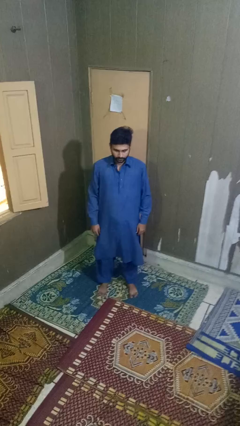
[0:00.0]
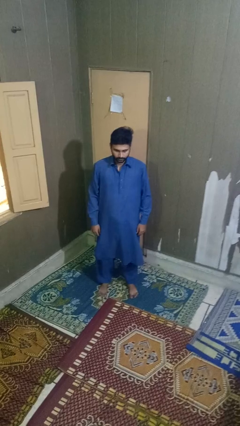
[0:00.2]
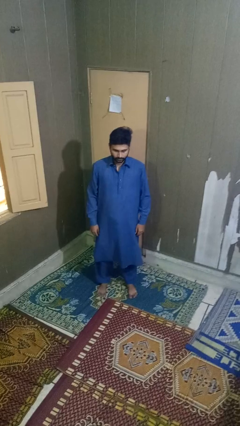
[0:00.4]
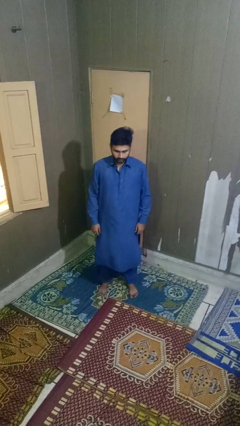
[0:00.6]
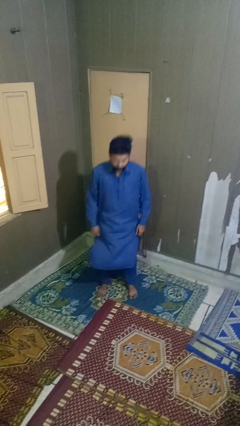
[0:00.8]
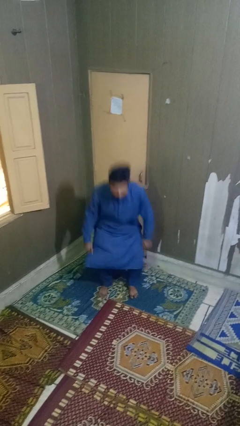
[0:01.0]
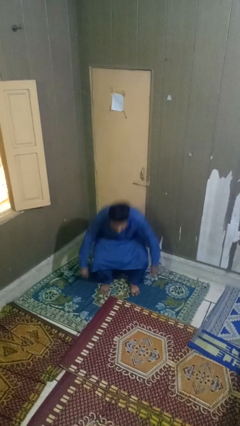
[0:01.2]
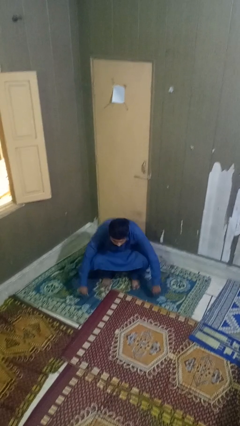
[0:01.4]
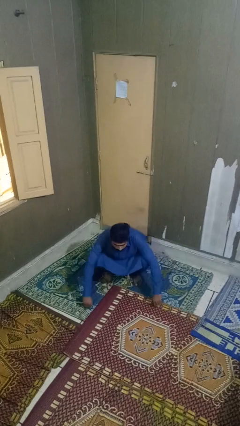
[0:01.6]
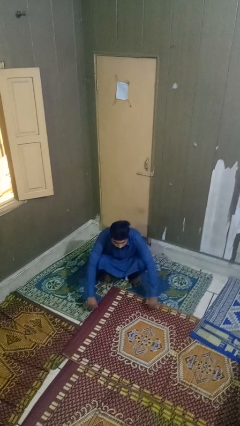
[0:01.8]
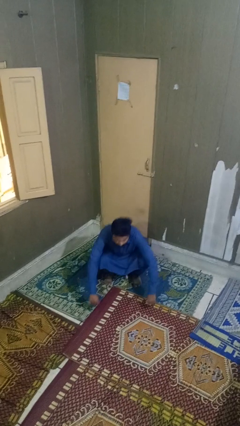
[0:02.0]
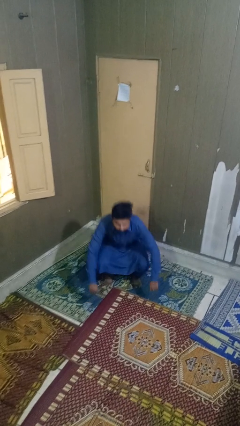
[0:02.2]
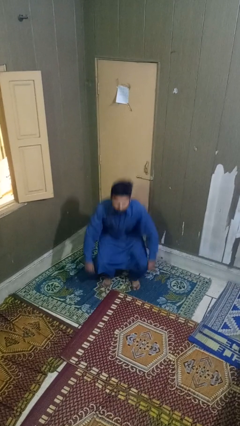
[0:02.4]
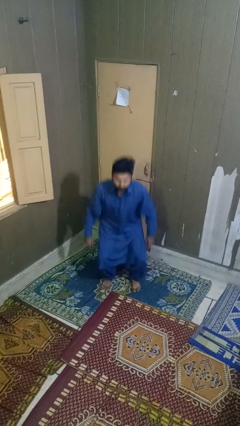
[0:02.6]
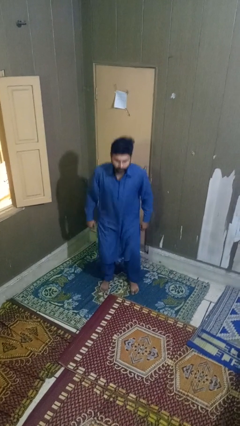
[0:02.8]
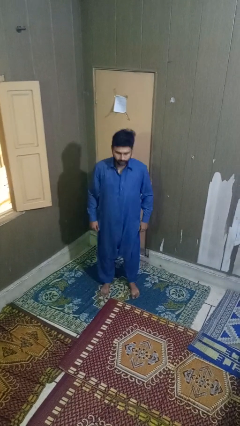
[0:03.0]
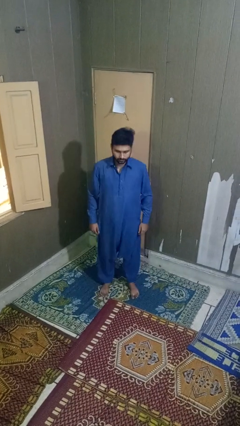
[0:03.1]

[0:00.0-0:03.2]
person exercises with situp

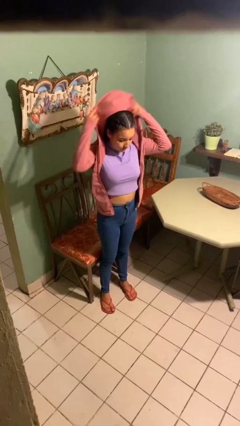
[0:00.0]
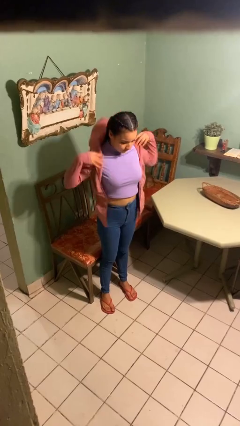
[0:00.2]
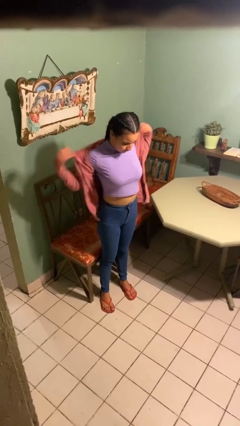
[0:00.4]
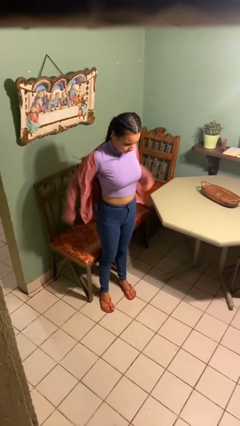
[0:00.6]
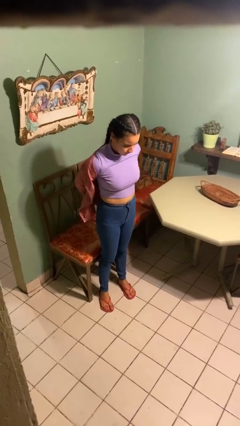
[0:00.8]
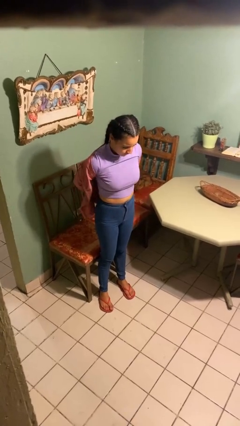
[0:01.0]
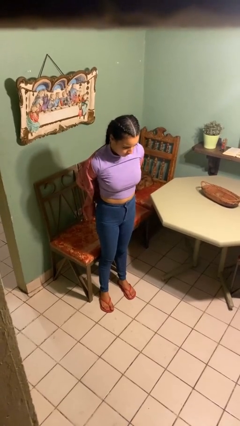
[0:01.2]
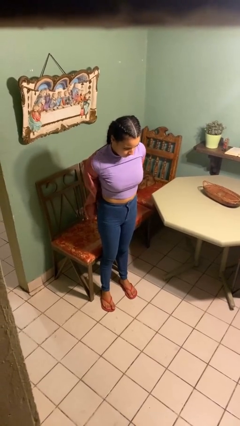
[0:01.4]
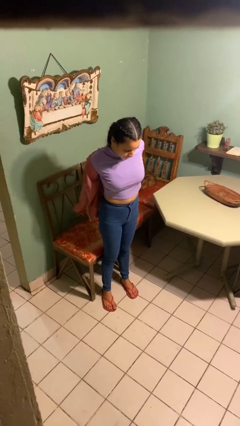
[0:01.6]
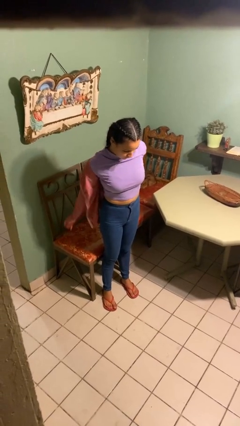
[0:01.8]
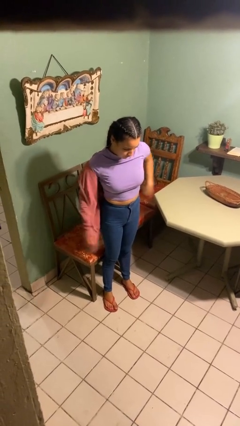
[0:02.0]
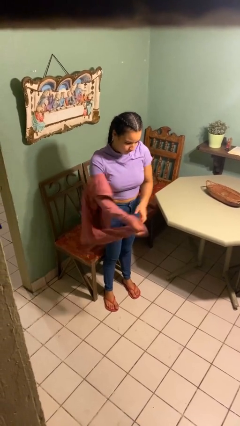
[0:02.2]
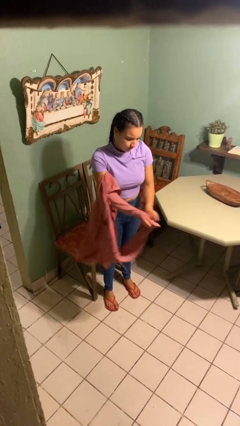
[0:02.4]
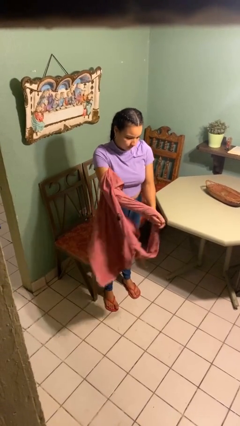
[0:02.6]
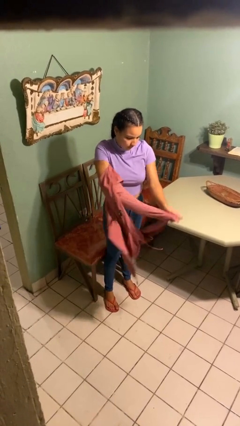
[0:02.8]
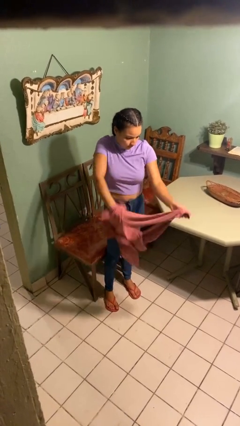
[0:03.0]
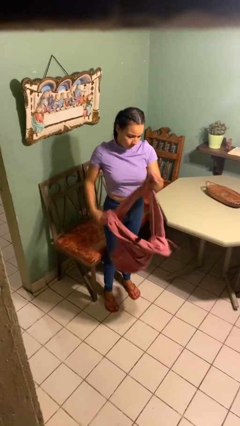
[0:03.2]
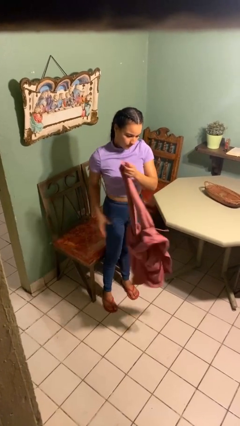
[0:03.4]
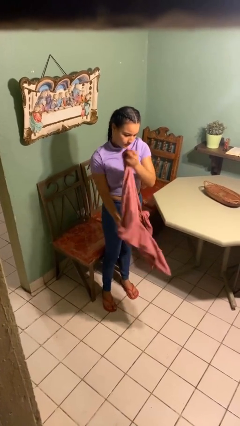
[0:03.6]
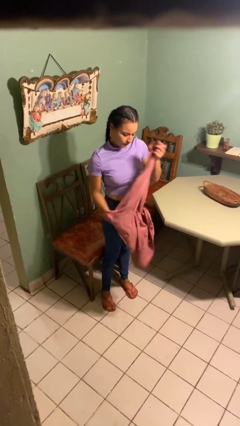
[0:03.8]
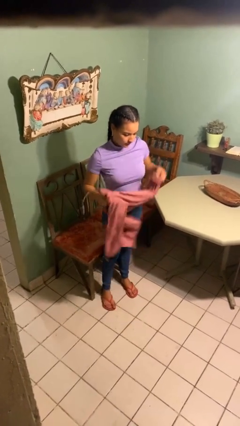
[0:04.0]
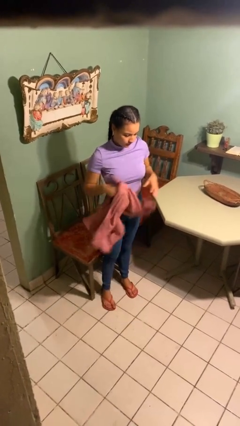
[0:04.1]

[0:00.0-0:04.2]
person takes off hoodie

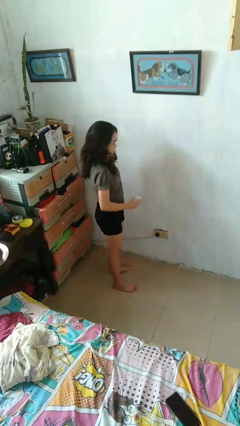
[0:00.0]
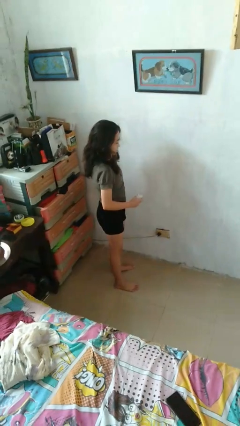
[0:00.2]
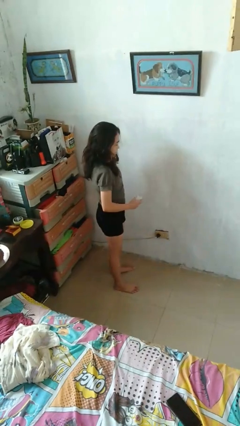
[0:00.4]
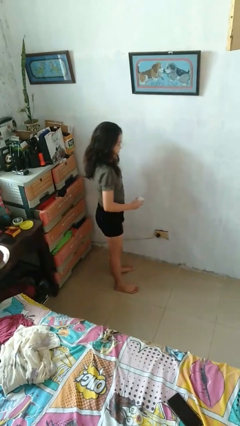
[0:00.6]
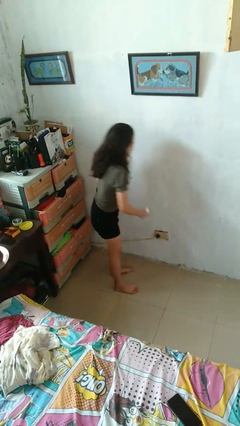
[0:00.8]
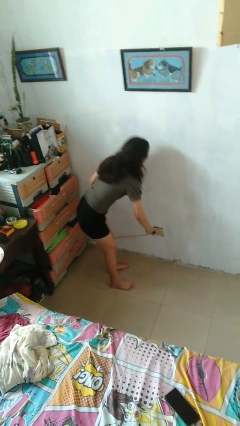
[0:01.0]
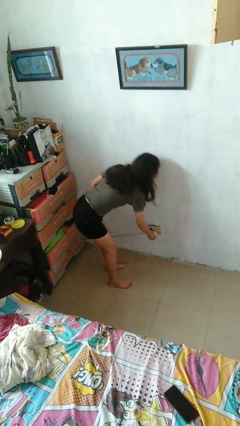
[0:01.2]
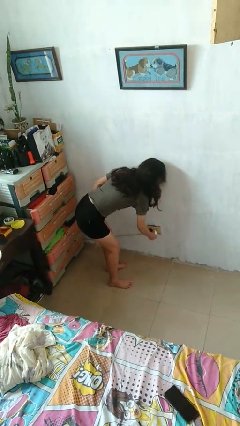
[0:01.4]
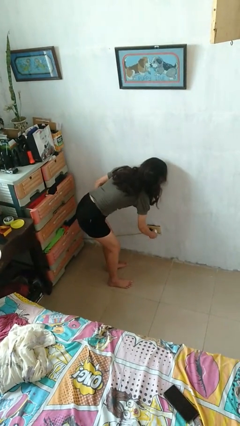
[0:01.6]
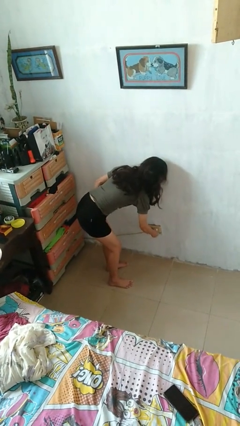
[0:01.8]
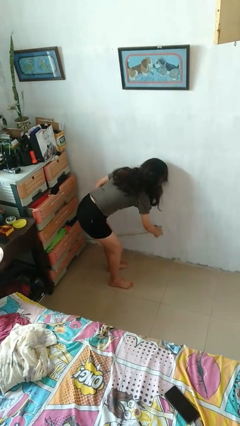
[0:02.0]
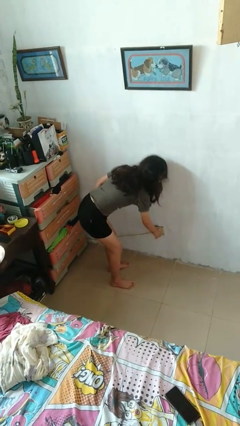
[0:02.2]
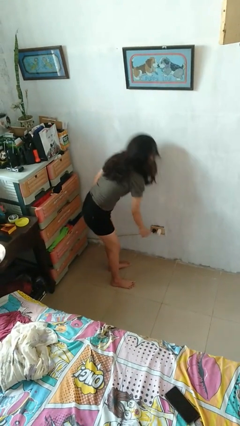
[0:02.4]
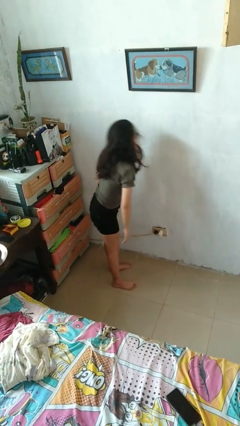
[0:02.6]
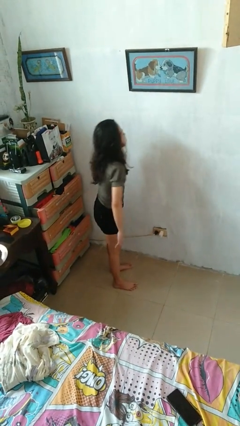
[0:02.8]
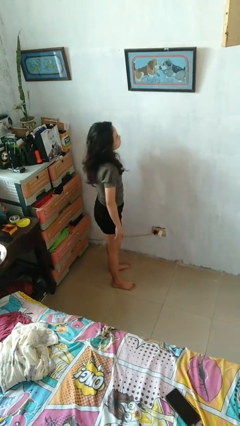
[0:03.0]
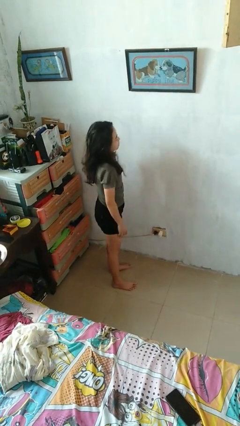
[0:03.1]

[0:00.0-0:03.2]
person plugs into electrical socket

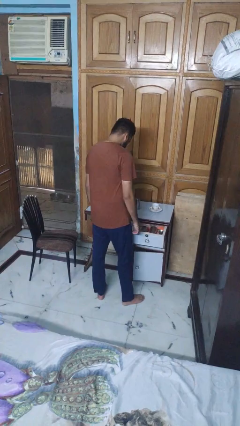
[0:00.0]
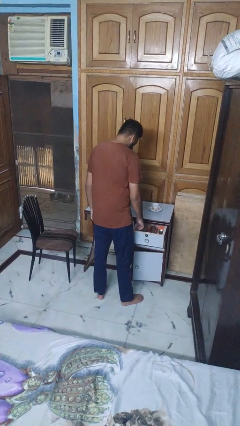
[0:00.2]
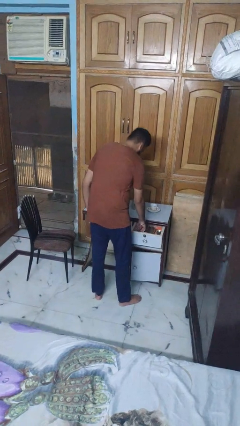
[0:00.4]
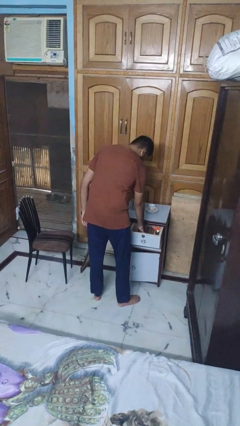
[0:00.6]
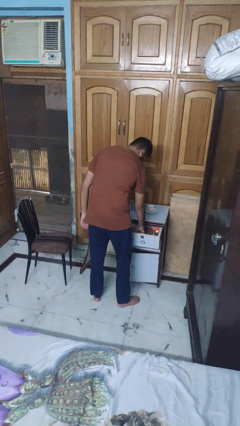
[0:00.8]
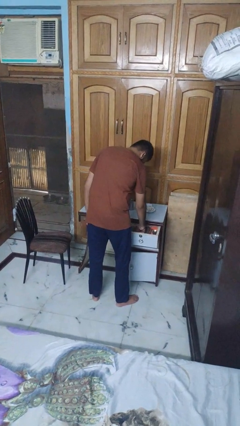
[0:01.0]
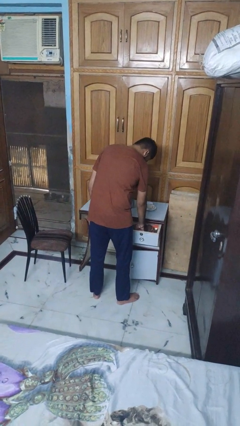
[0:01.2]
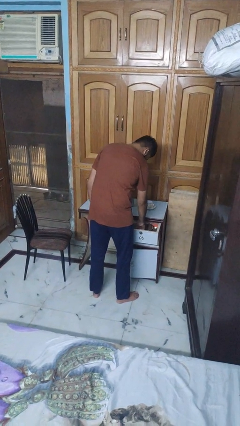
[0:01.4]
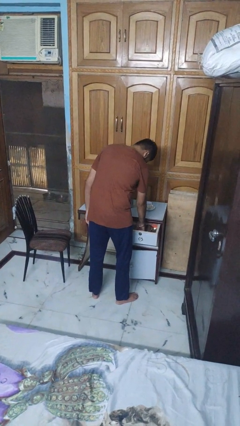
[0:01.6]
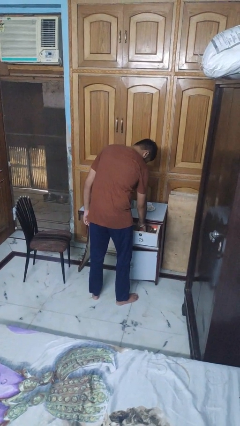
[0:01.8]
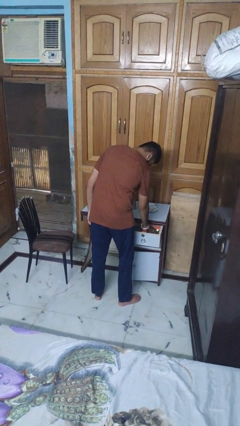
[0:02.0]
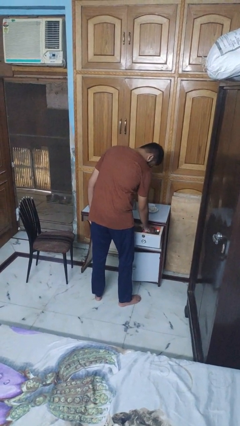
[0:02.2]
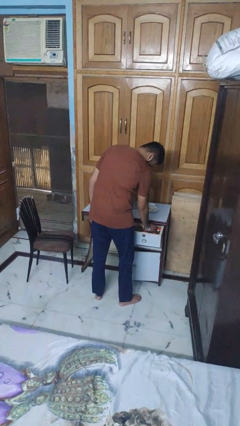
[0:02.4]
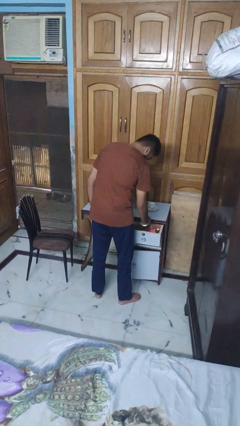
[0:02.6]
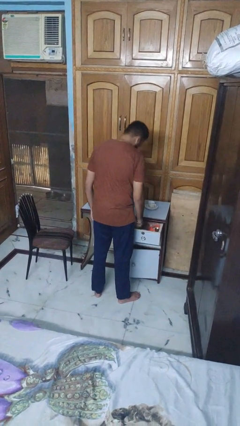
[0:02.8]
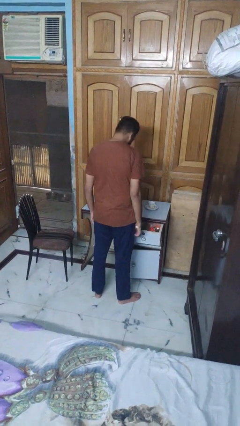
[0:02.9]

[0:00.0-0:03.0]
person searches in kitchen drawer

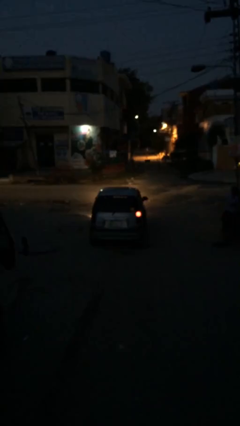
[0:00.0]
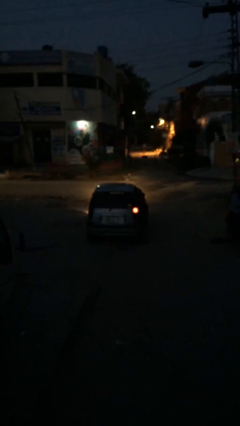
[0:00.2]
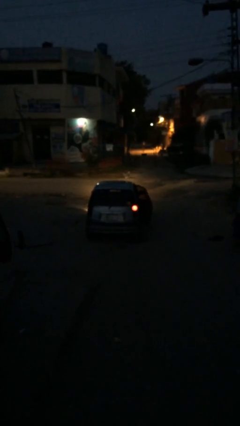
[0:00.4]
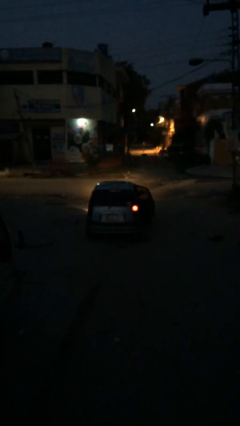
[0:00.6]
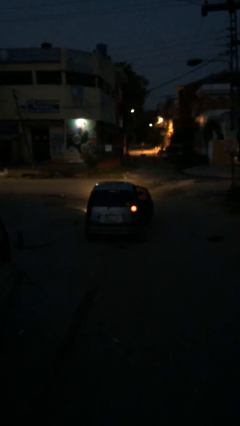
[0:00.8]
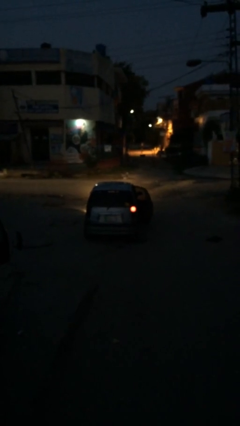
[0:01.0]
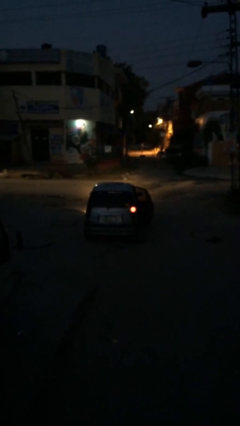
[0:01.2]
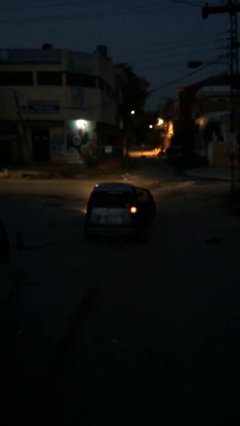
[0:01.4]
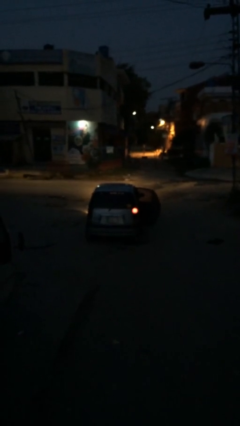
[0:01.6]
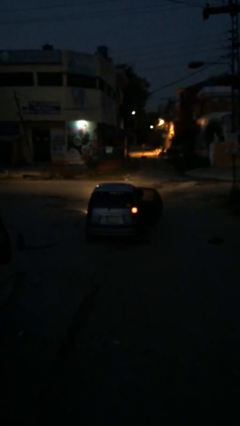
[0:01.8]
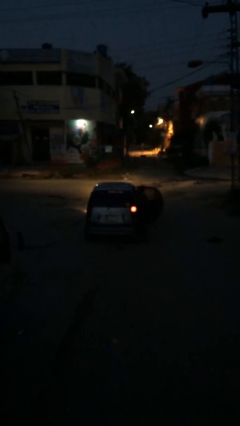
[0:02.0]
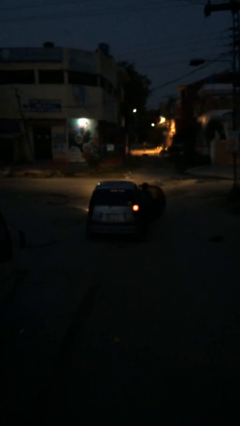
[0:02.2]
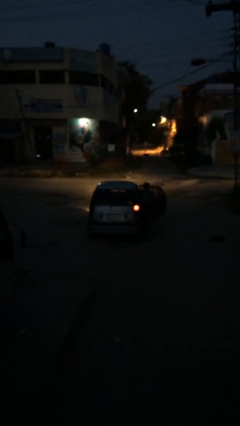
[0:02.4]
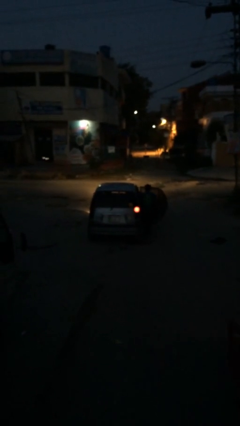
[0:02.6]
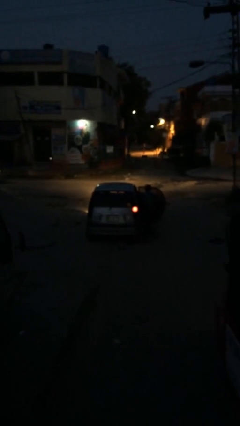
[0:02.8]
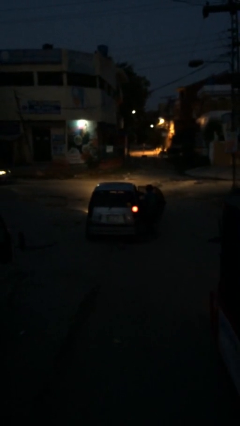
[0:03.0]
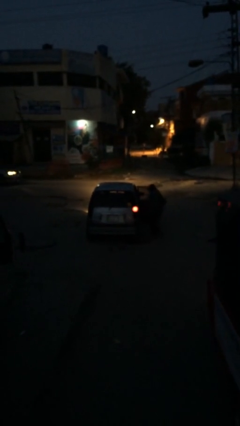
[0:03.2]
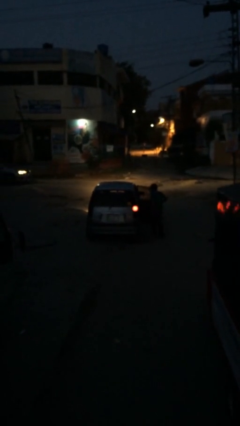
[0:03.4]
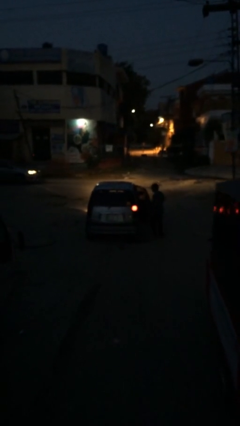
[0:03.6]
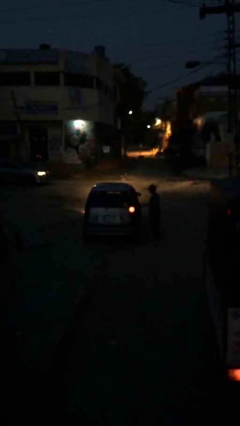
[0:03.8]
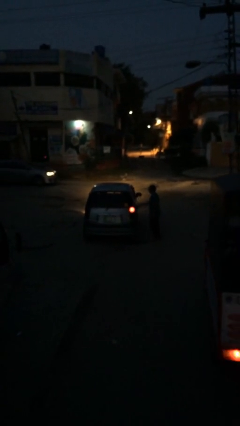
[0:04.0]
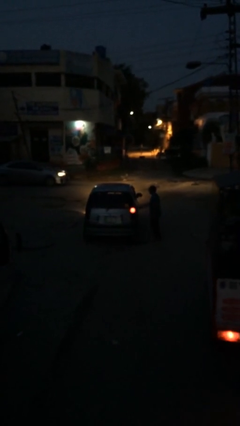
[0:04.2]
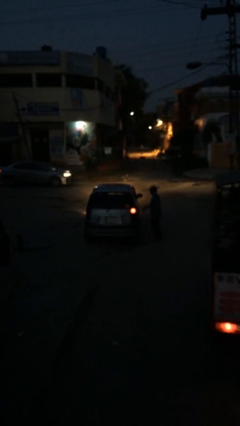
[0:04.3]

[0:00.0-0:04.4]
car drops off person
